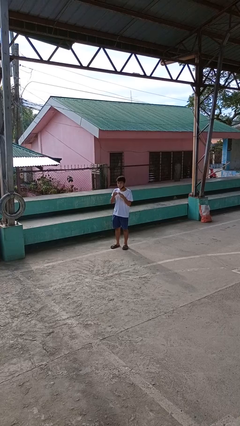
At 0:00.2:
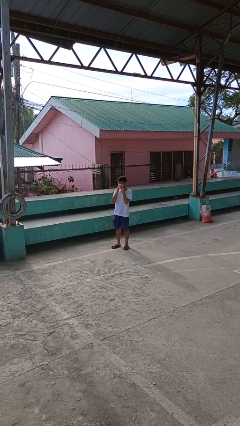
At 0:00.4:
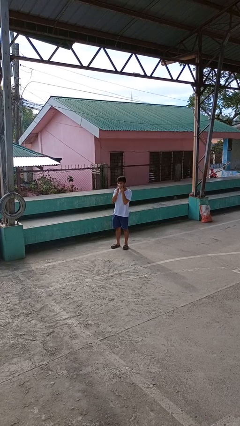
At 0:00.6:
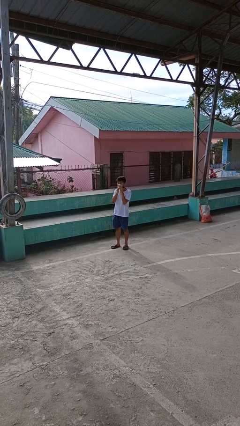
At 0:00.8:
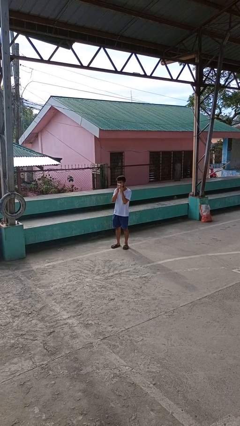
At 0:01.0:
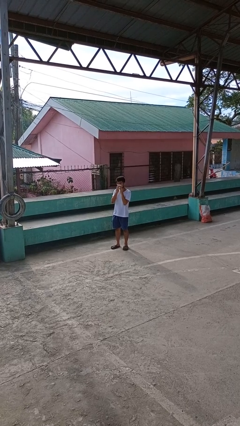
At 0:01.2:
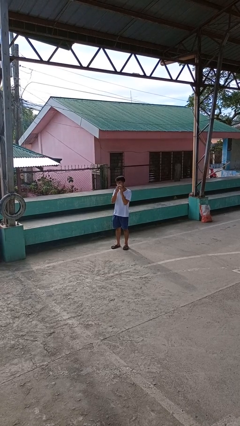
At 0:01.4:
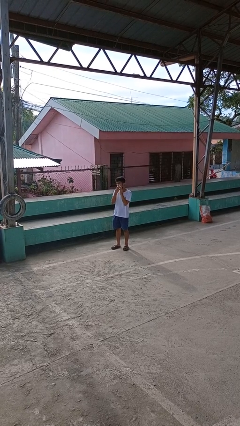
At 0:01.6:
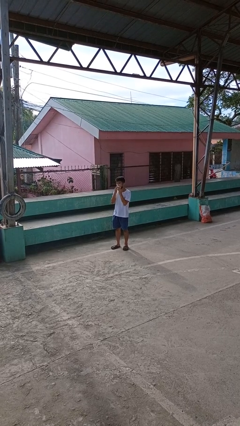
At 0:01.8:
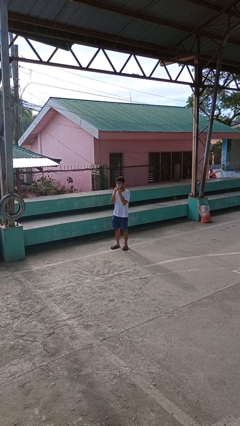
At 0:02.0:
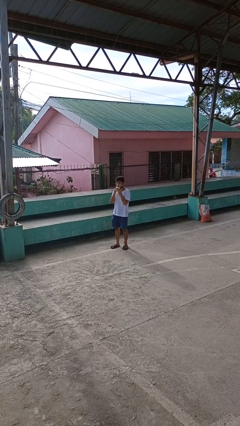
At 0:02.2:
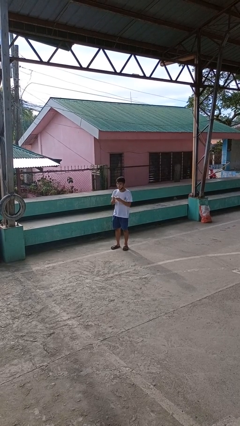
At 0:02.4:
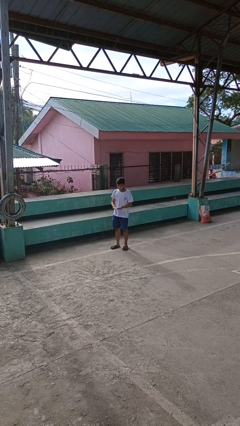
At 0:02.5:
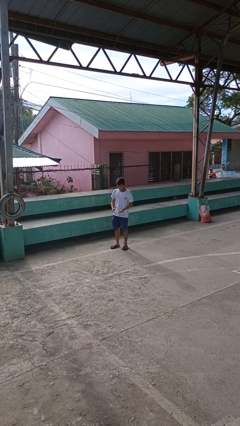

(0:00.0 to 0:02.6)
person wipes mouth with napkin

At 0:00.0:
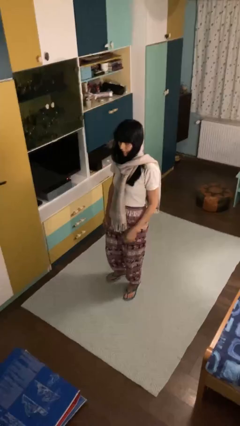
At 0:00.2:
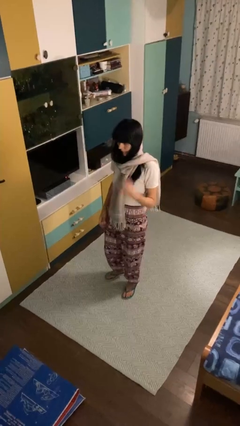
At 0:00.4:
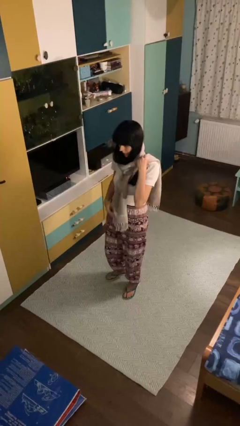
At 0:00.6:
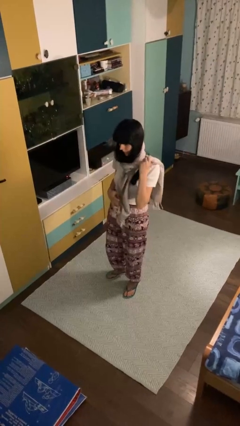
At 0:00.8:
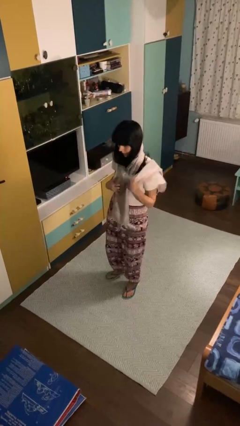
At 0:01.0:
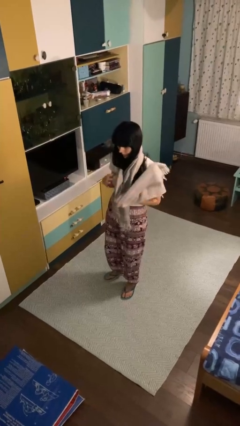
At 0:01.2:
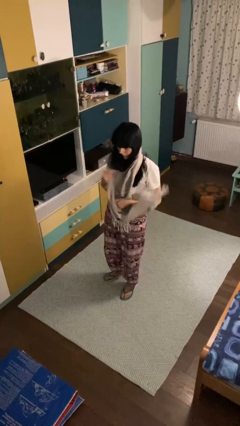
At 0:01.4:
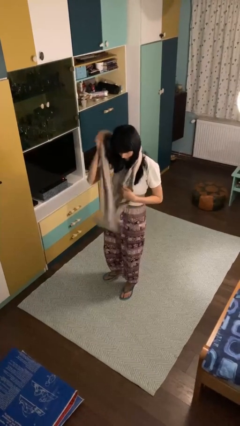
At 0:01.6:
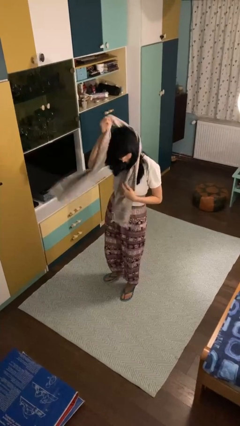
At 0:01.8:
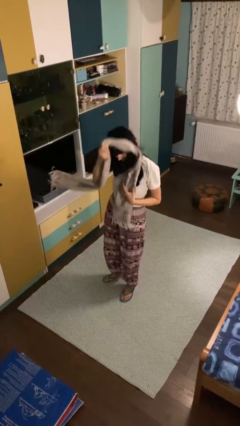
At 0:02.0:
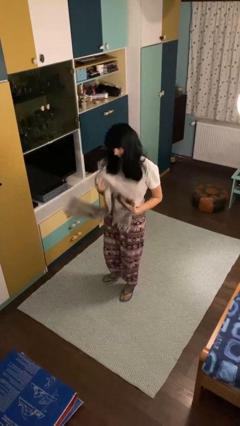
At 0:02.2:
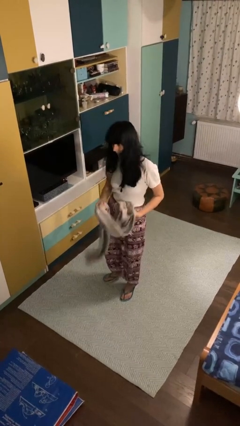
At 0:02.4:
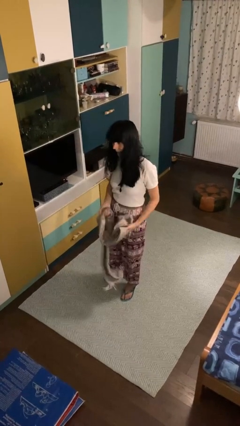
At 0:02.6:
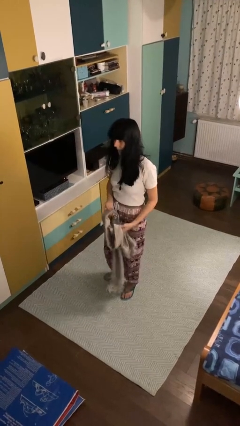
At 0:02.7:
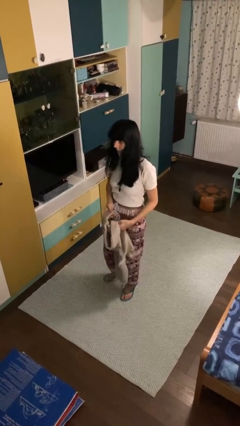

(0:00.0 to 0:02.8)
person takes off scarf

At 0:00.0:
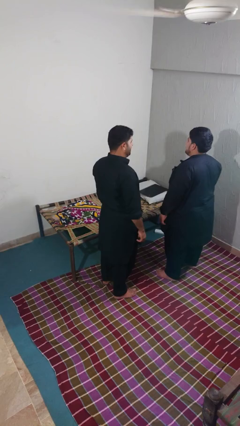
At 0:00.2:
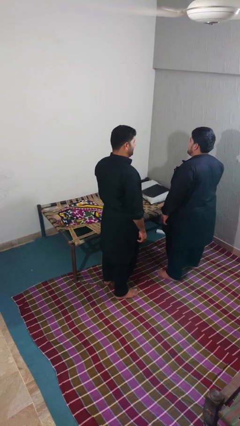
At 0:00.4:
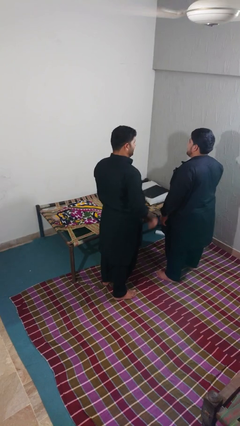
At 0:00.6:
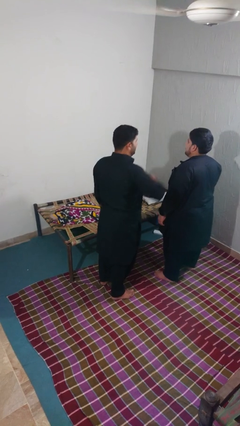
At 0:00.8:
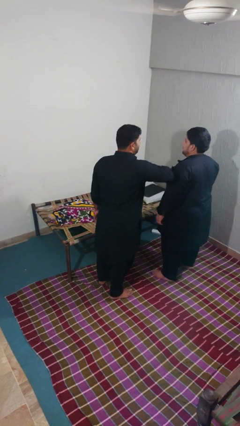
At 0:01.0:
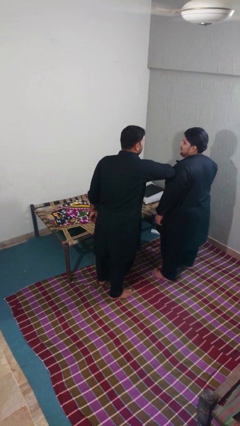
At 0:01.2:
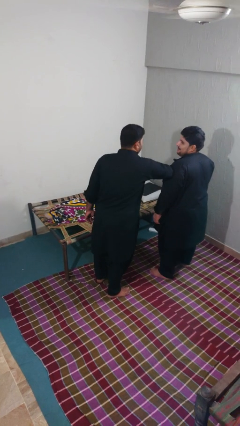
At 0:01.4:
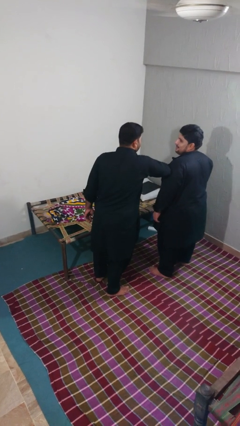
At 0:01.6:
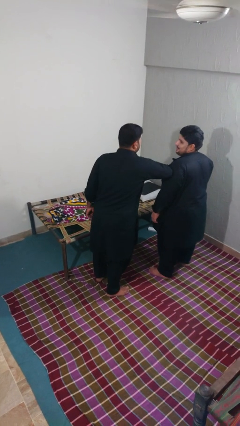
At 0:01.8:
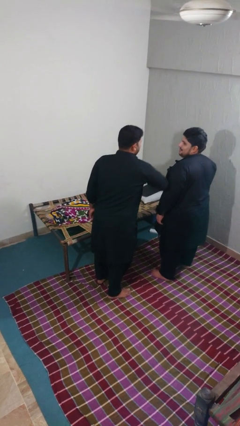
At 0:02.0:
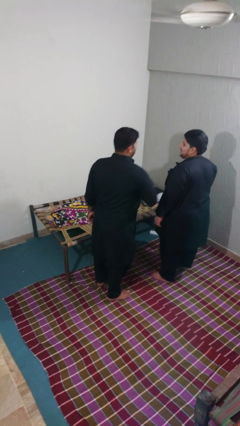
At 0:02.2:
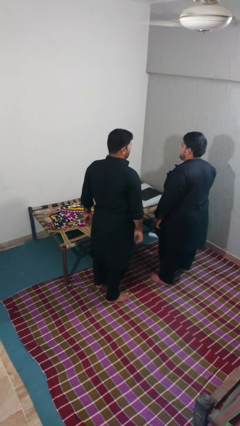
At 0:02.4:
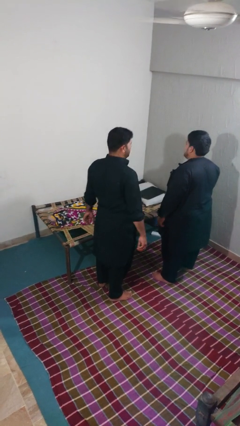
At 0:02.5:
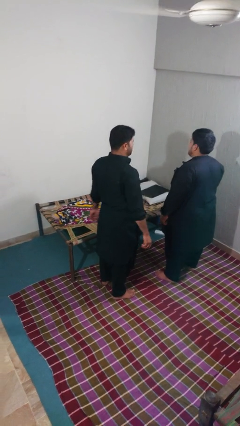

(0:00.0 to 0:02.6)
person nudges person with elbow

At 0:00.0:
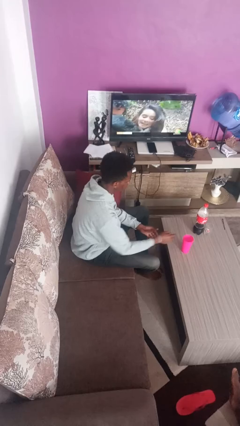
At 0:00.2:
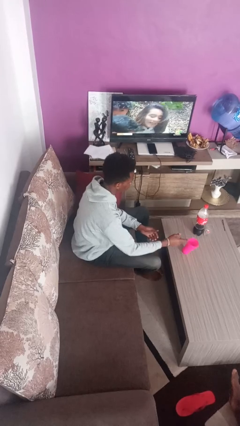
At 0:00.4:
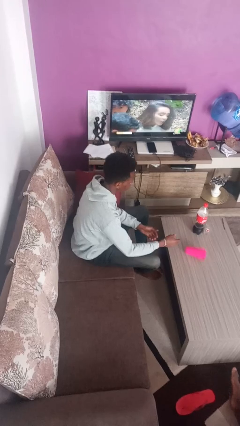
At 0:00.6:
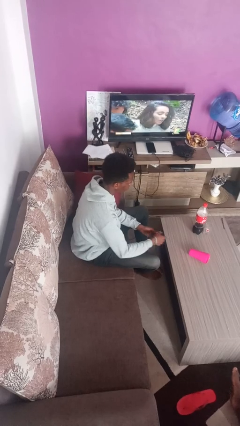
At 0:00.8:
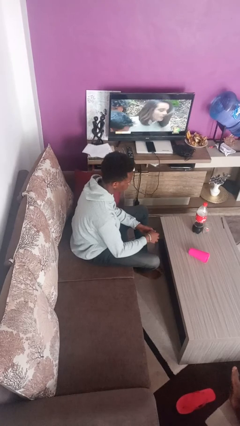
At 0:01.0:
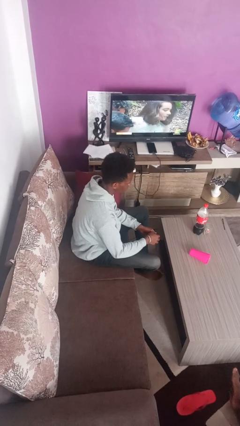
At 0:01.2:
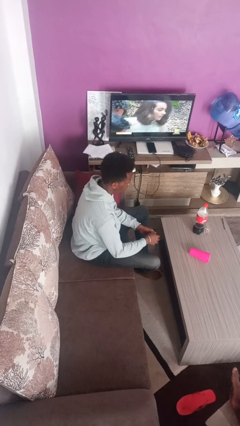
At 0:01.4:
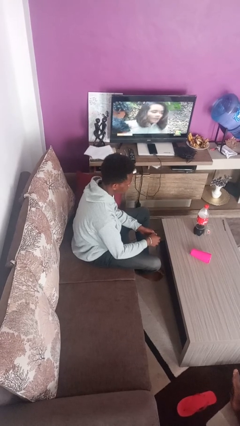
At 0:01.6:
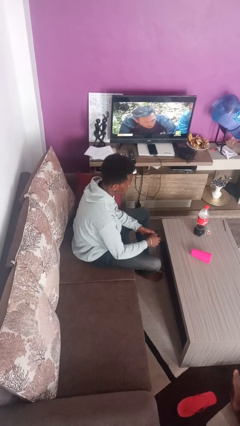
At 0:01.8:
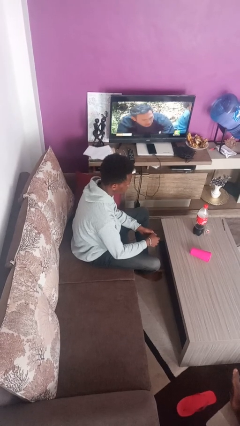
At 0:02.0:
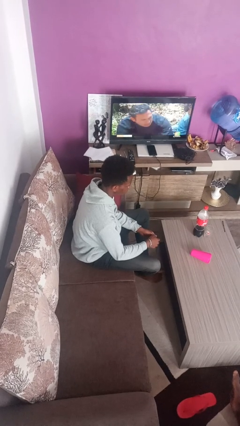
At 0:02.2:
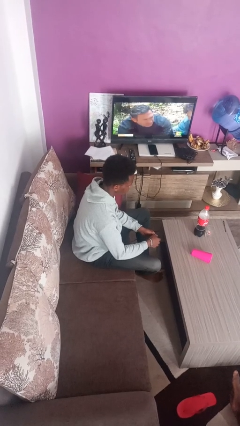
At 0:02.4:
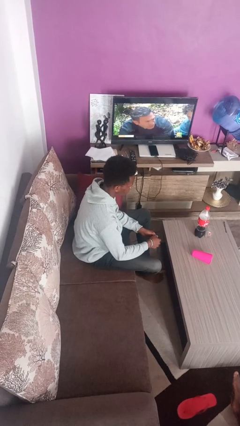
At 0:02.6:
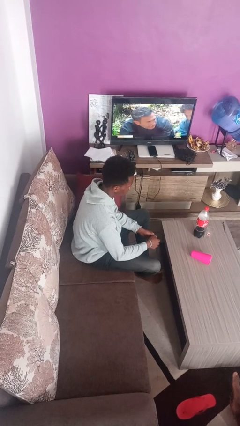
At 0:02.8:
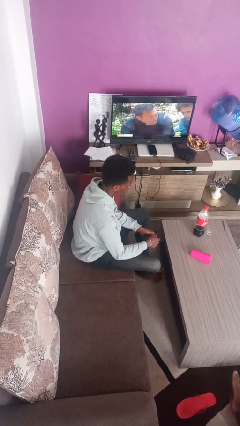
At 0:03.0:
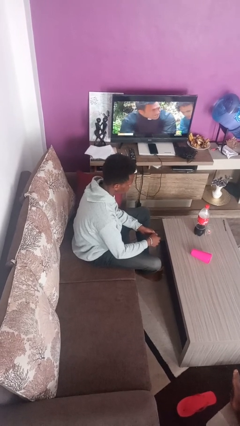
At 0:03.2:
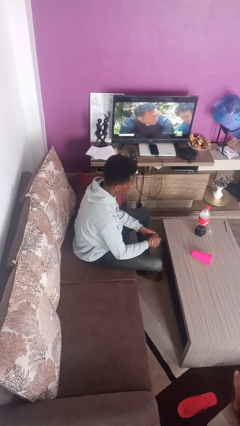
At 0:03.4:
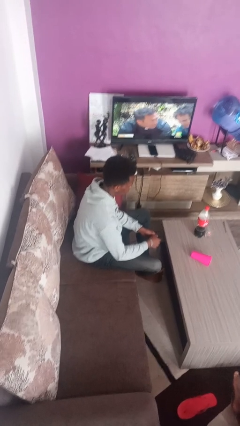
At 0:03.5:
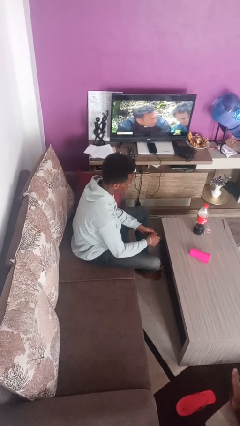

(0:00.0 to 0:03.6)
person knocks over glass

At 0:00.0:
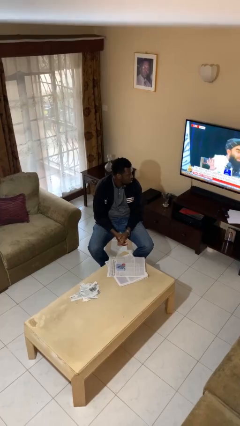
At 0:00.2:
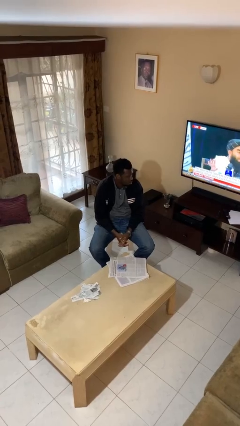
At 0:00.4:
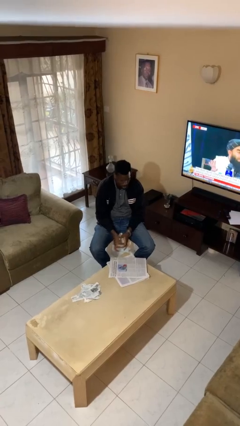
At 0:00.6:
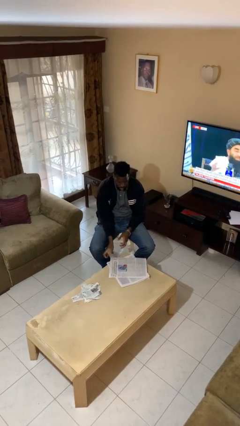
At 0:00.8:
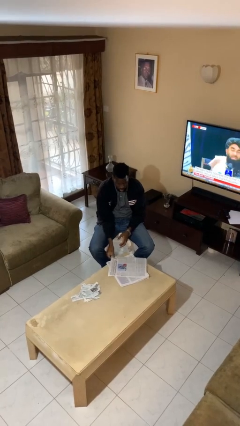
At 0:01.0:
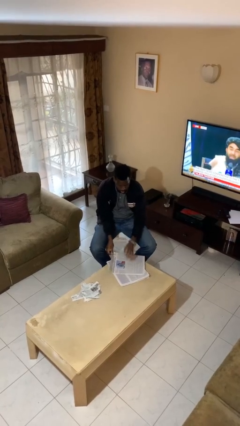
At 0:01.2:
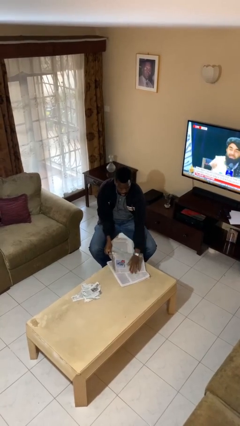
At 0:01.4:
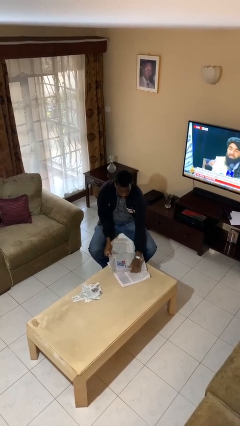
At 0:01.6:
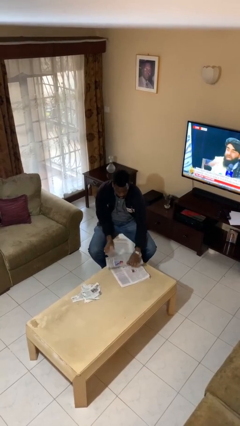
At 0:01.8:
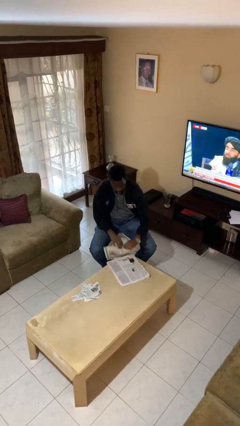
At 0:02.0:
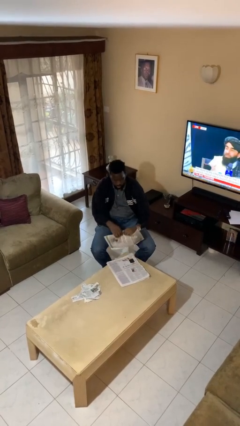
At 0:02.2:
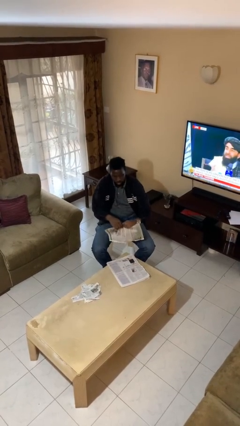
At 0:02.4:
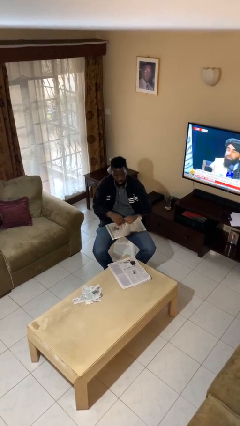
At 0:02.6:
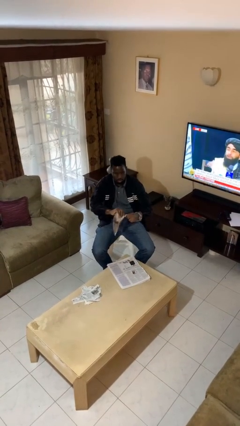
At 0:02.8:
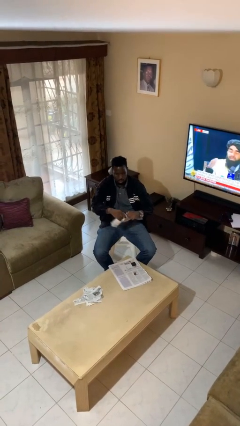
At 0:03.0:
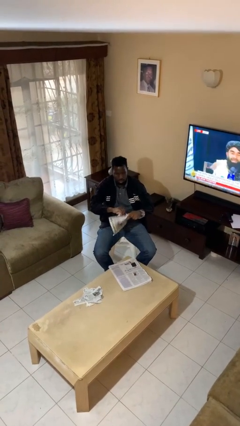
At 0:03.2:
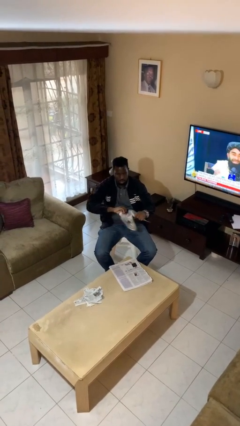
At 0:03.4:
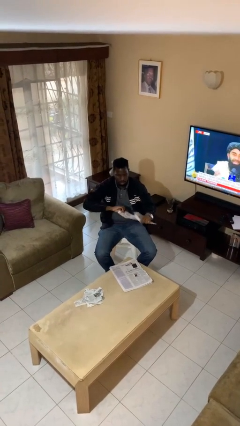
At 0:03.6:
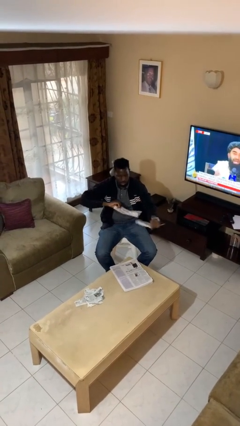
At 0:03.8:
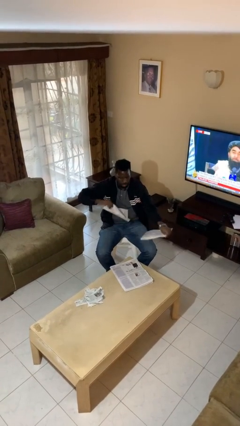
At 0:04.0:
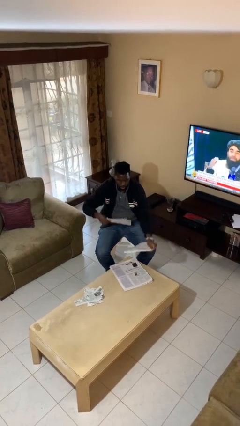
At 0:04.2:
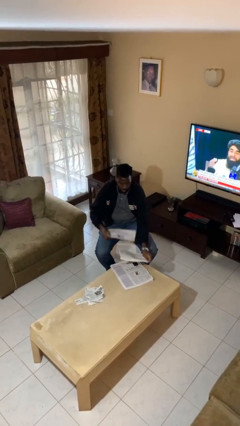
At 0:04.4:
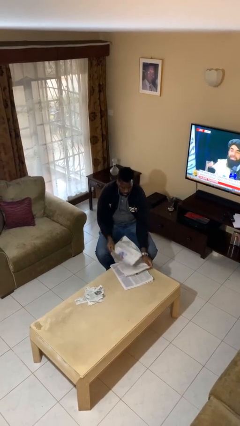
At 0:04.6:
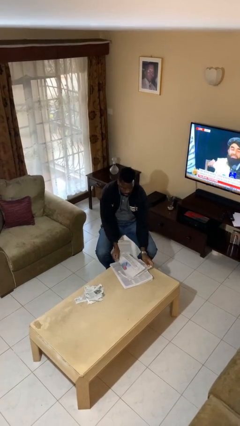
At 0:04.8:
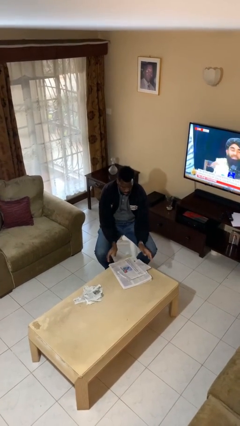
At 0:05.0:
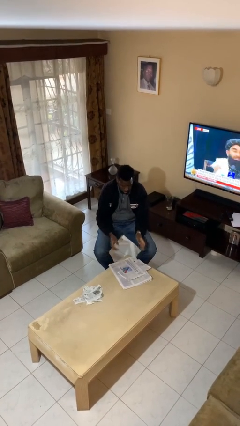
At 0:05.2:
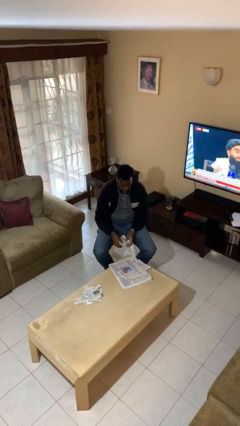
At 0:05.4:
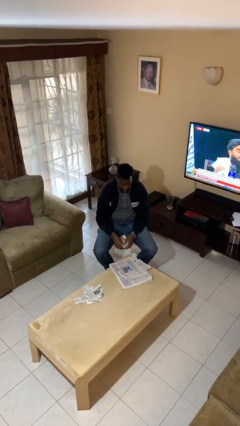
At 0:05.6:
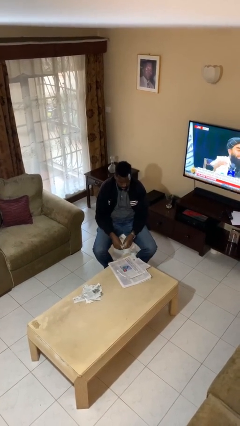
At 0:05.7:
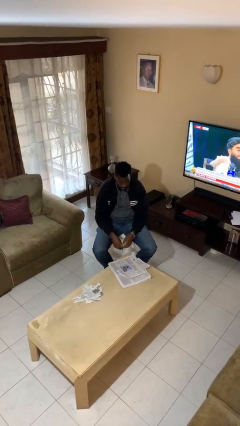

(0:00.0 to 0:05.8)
person tears paper

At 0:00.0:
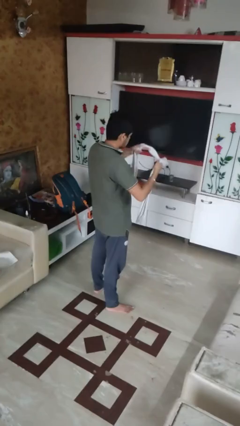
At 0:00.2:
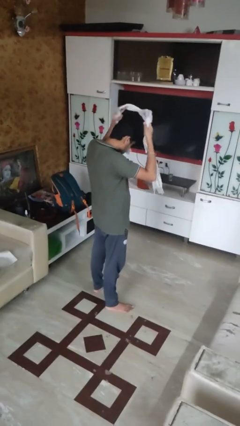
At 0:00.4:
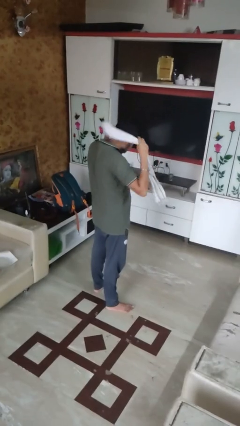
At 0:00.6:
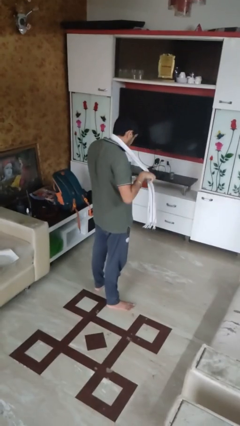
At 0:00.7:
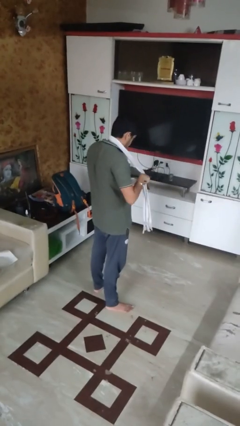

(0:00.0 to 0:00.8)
person puts on scarf
